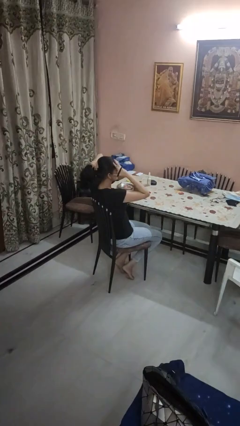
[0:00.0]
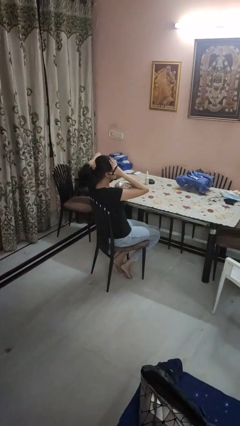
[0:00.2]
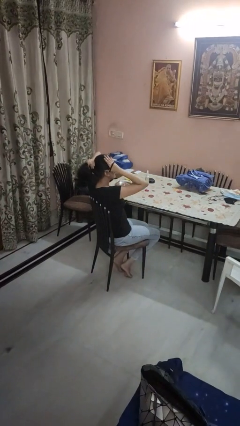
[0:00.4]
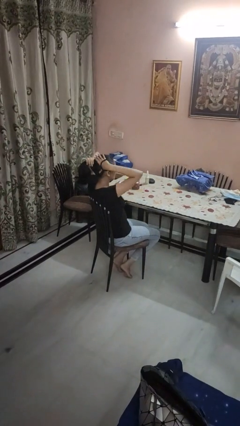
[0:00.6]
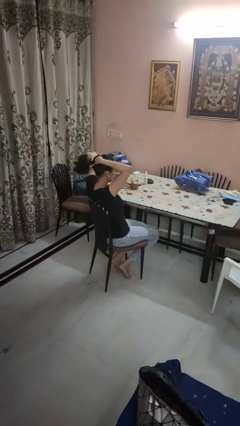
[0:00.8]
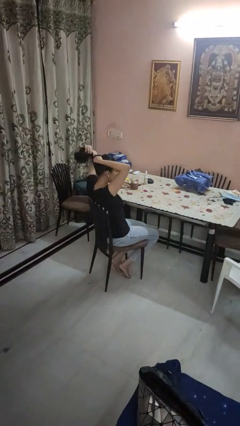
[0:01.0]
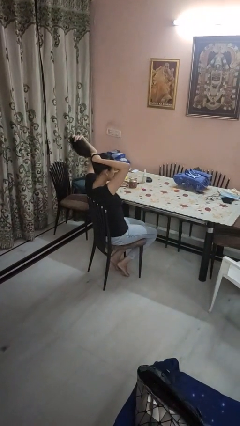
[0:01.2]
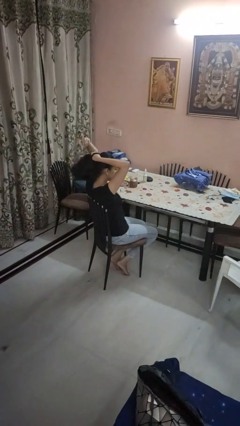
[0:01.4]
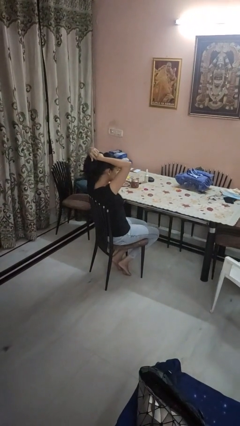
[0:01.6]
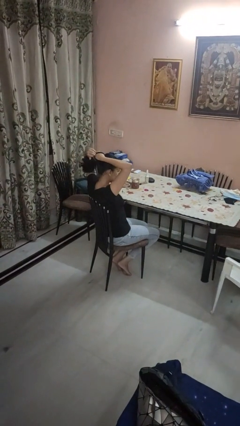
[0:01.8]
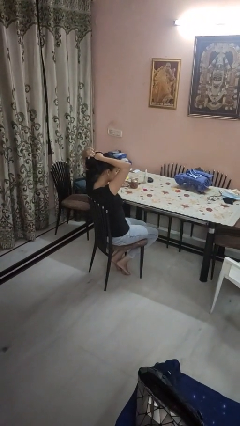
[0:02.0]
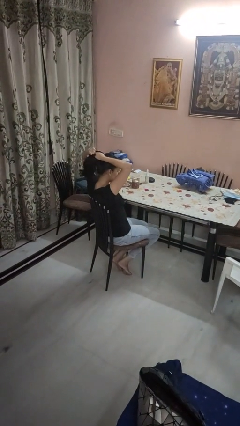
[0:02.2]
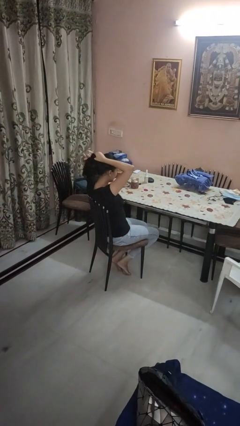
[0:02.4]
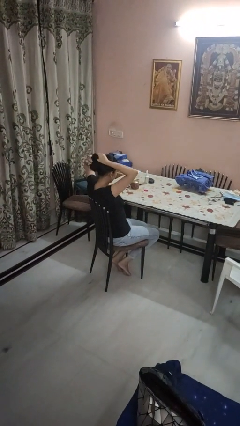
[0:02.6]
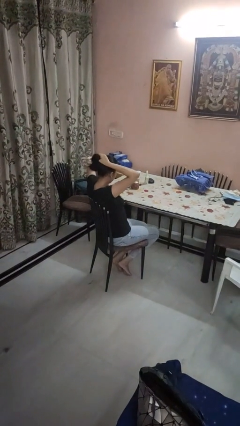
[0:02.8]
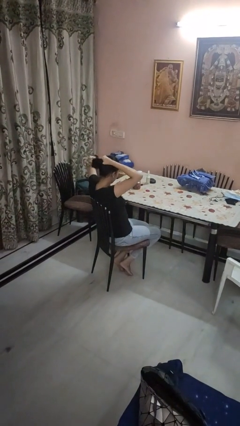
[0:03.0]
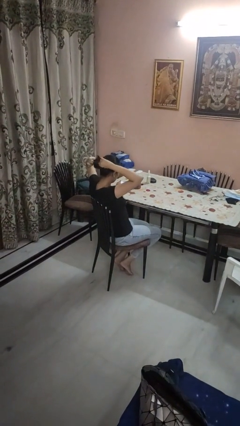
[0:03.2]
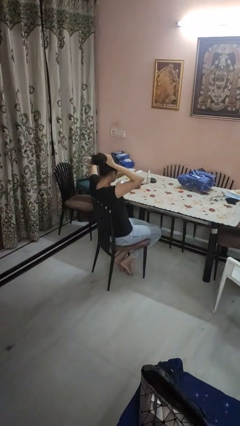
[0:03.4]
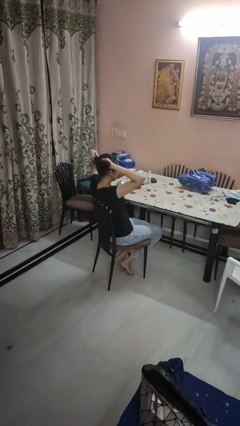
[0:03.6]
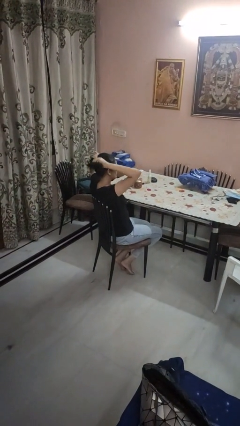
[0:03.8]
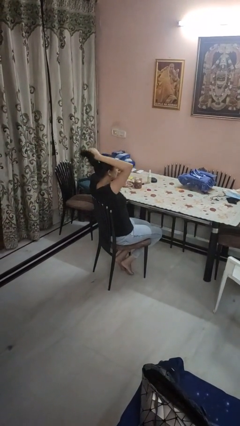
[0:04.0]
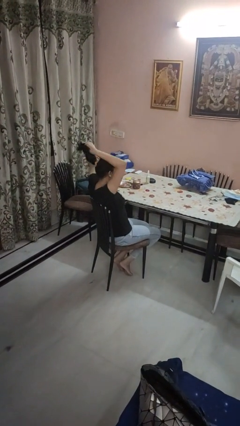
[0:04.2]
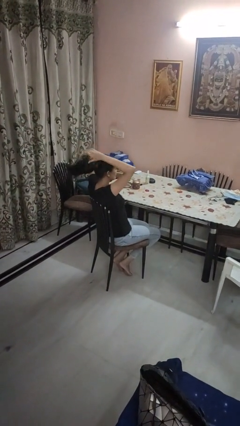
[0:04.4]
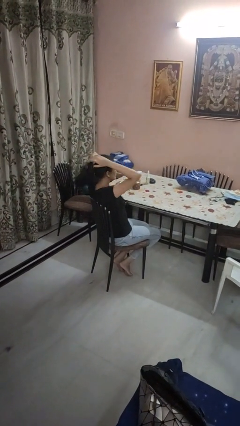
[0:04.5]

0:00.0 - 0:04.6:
person puts hair in ponytail

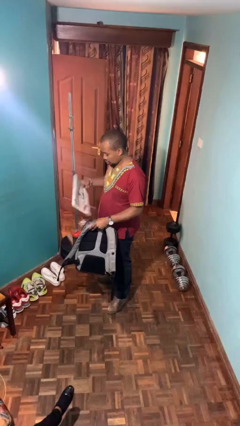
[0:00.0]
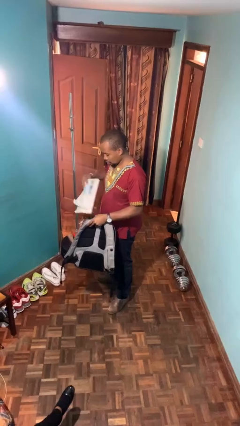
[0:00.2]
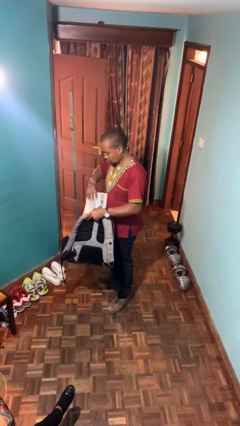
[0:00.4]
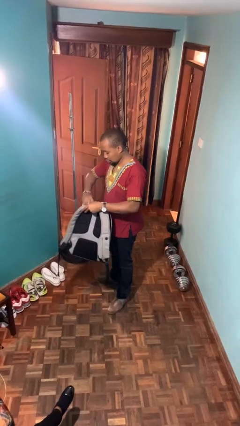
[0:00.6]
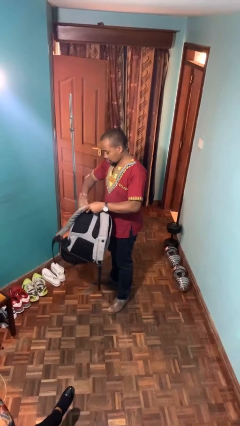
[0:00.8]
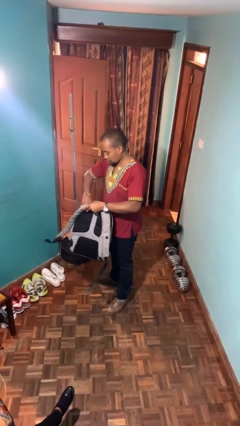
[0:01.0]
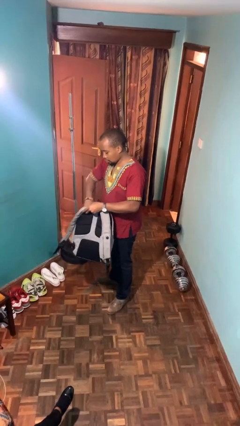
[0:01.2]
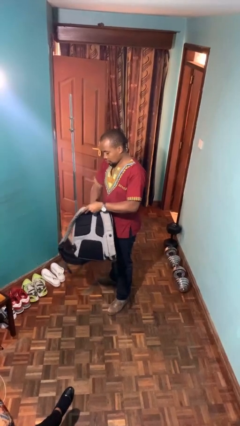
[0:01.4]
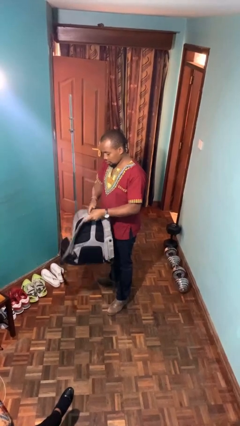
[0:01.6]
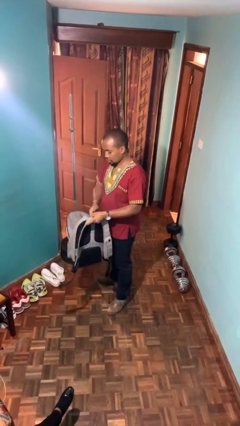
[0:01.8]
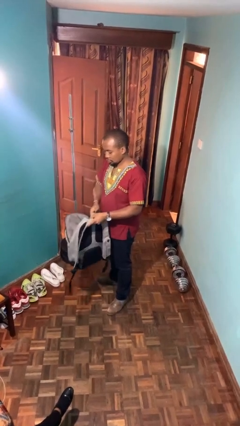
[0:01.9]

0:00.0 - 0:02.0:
person puts object into backpack

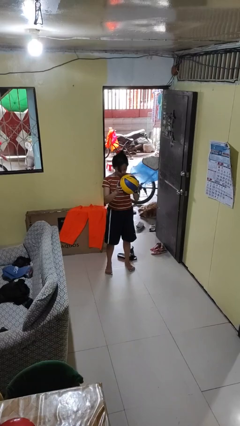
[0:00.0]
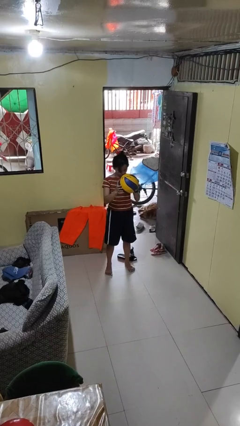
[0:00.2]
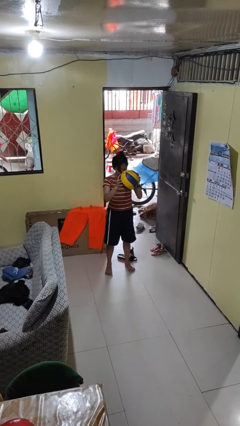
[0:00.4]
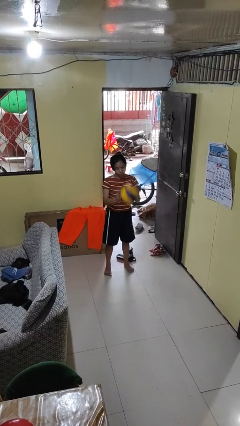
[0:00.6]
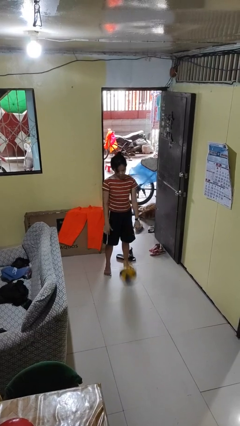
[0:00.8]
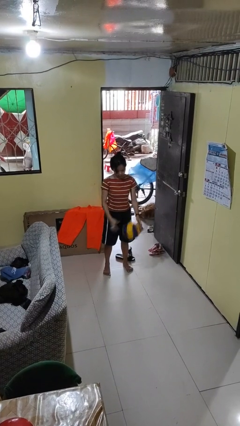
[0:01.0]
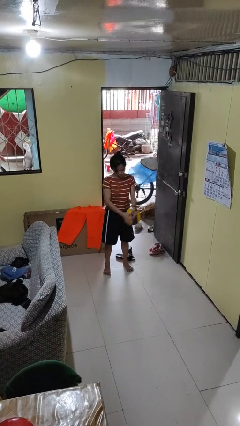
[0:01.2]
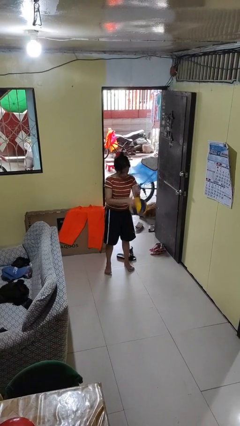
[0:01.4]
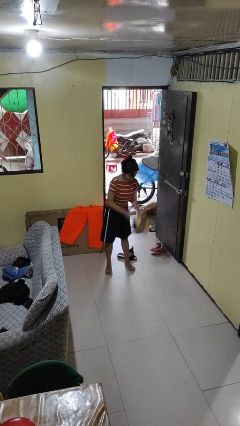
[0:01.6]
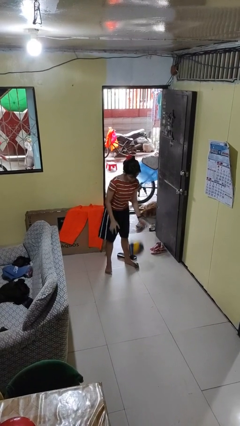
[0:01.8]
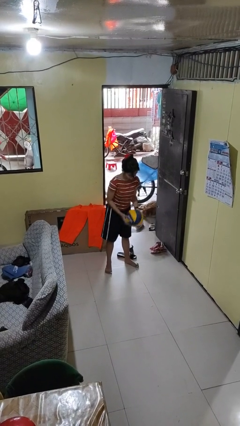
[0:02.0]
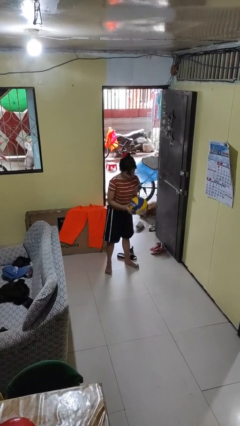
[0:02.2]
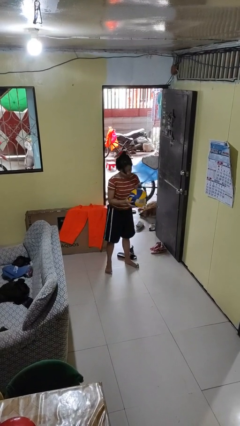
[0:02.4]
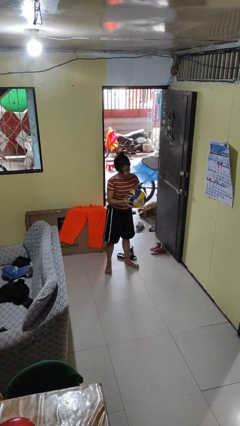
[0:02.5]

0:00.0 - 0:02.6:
person bounces ball on floor

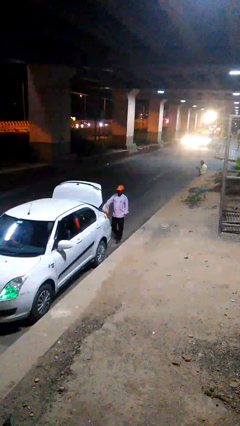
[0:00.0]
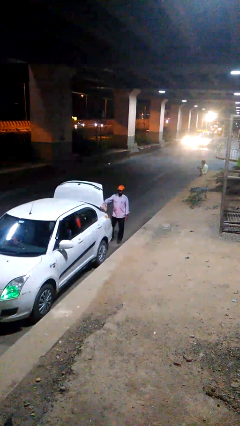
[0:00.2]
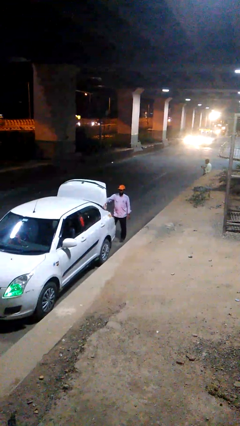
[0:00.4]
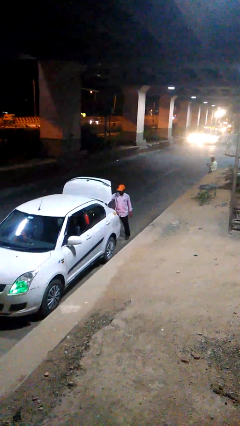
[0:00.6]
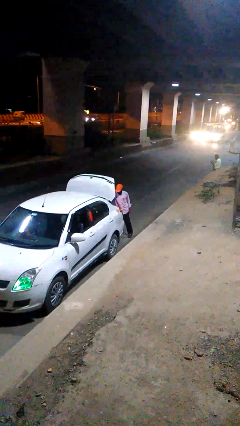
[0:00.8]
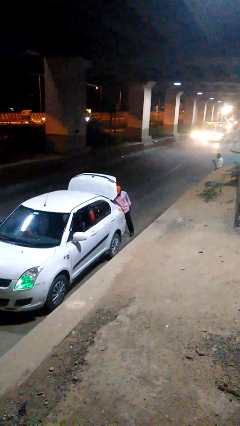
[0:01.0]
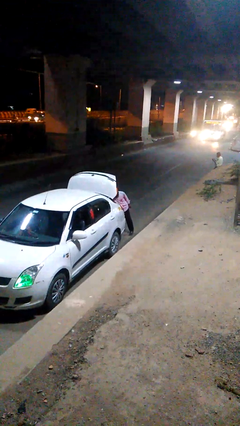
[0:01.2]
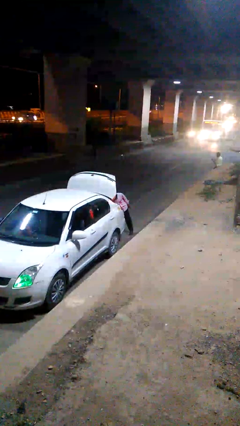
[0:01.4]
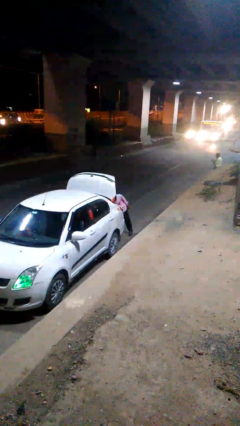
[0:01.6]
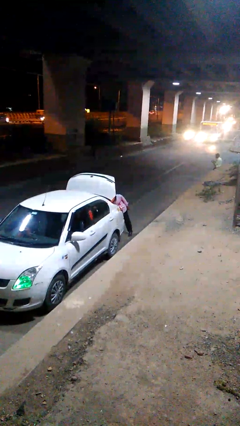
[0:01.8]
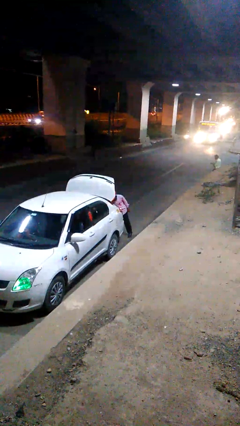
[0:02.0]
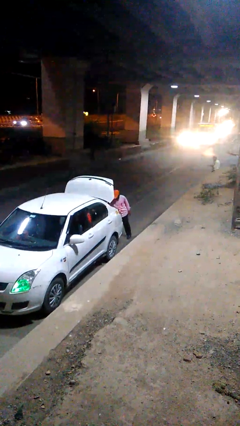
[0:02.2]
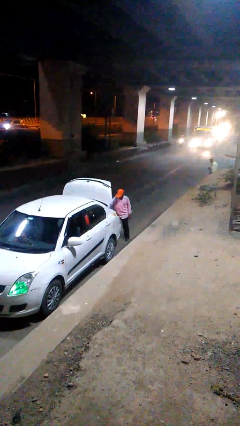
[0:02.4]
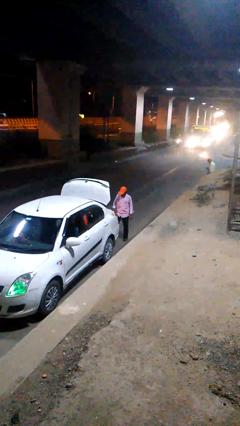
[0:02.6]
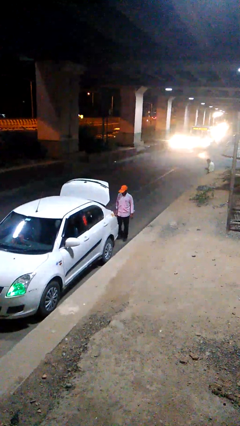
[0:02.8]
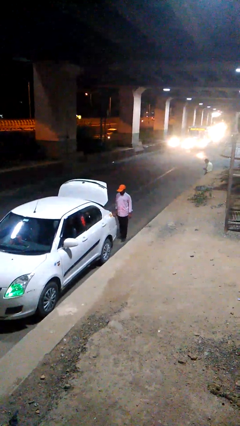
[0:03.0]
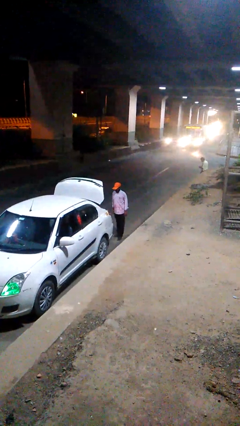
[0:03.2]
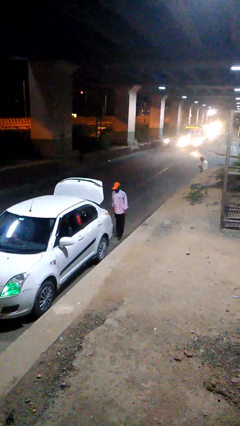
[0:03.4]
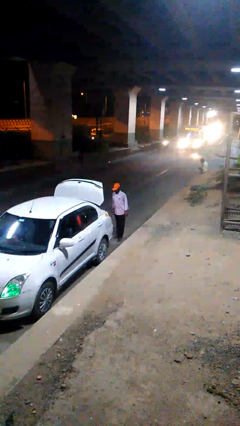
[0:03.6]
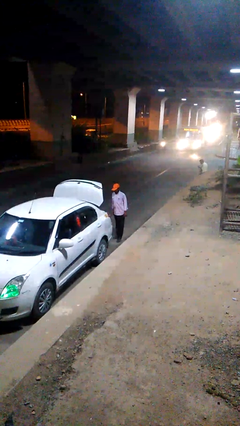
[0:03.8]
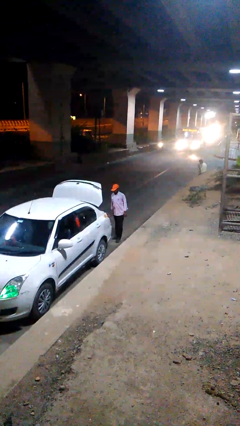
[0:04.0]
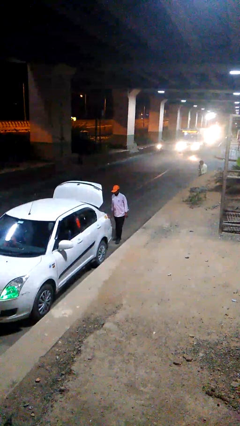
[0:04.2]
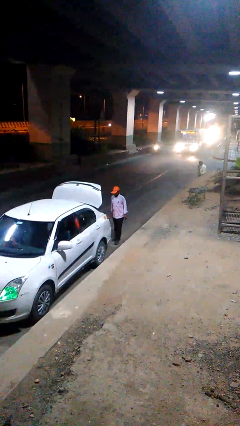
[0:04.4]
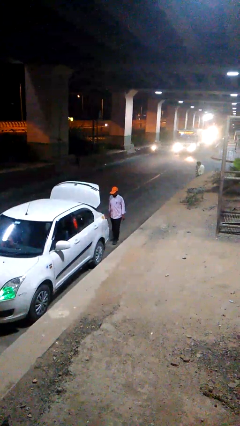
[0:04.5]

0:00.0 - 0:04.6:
person loads car

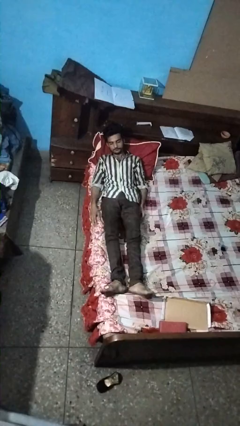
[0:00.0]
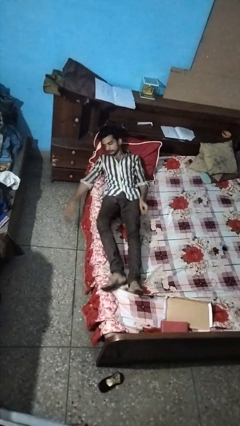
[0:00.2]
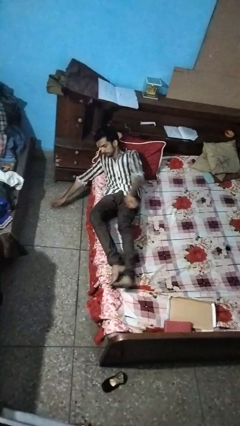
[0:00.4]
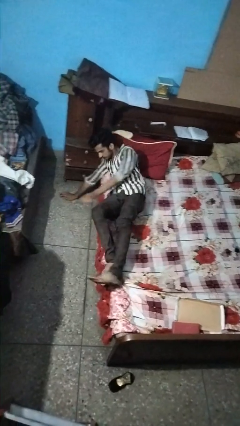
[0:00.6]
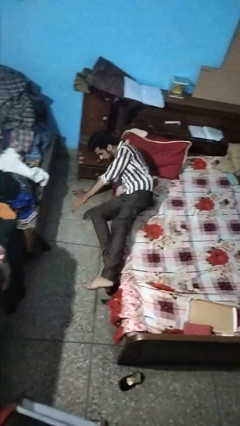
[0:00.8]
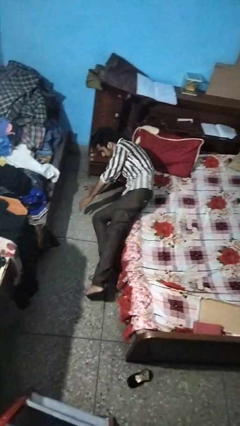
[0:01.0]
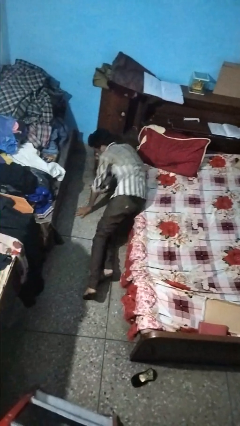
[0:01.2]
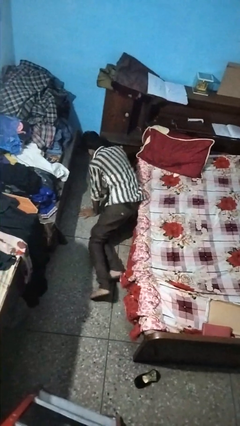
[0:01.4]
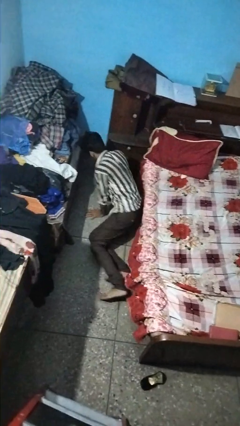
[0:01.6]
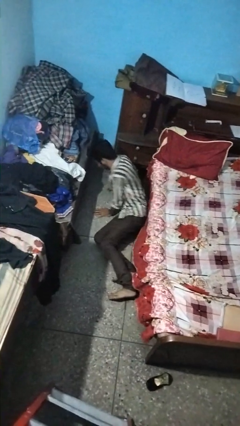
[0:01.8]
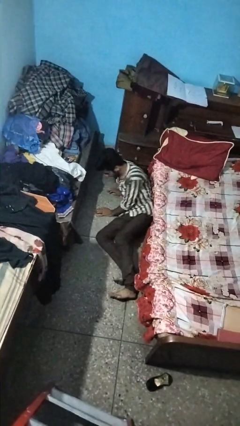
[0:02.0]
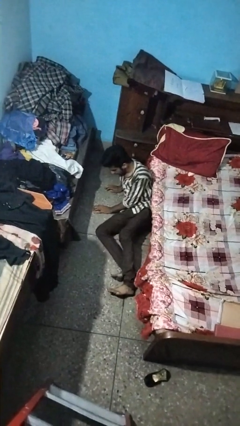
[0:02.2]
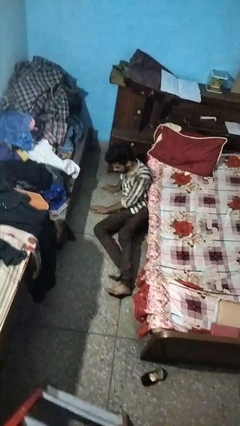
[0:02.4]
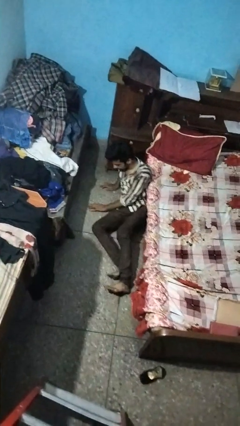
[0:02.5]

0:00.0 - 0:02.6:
person falls from bed

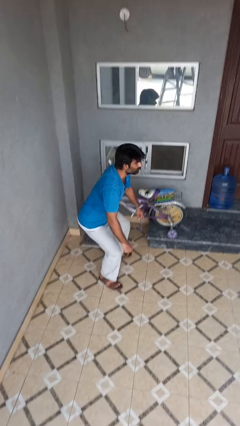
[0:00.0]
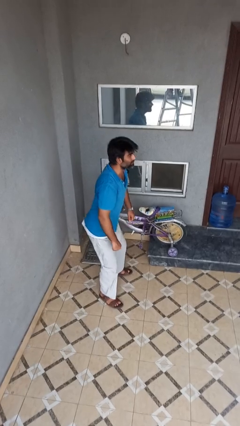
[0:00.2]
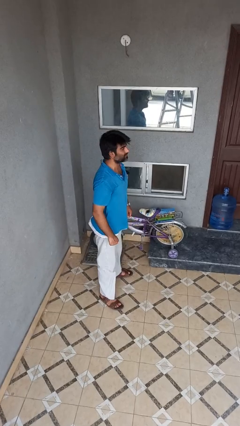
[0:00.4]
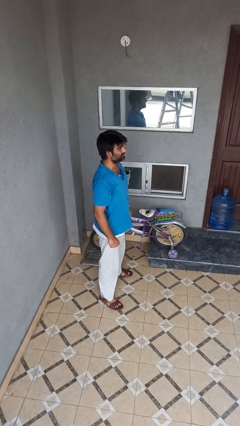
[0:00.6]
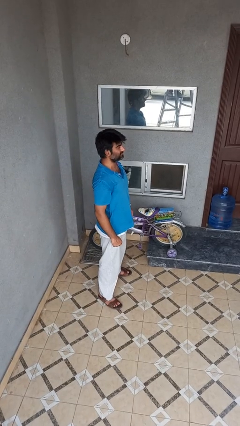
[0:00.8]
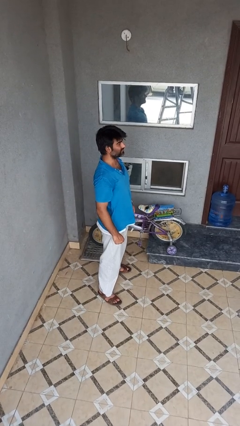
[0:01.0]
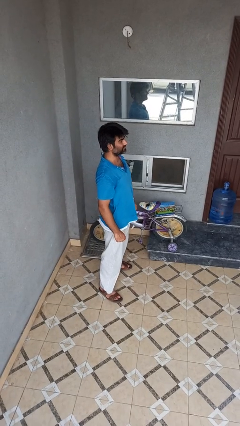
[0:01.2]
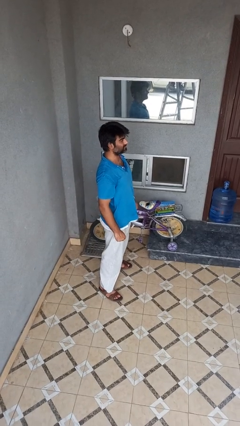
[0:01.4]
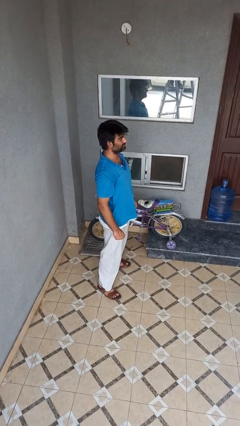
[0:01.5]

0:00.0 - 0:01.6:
person stands up
